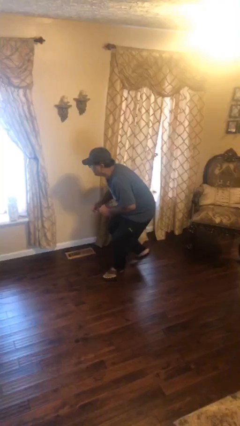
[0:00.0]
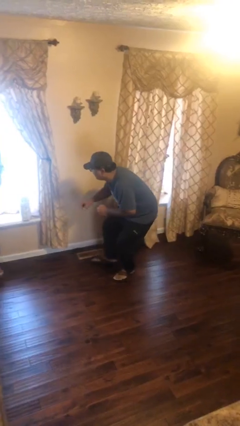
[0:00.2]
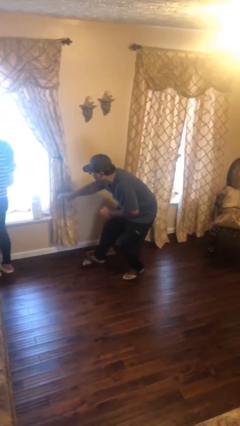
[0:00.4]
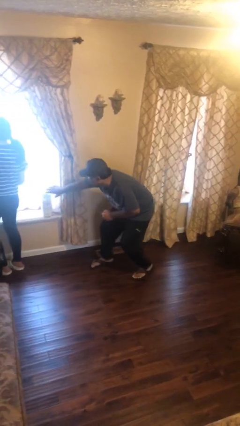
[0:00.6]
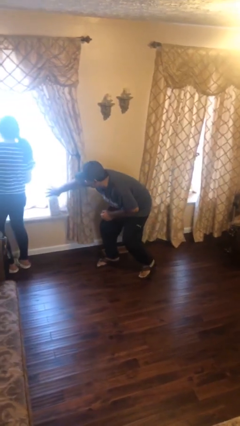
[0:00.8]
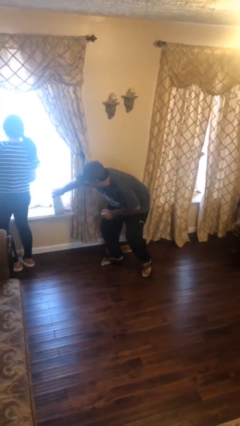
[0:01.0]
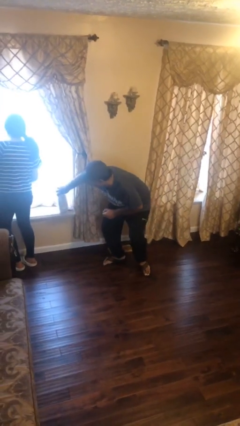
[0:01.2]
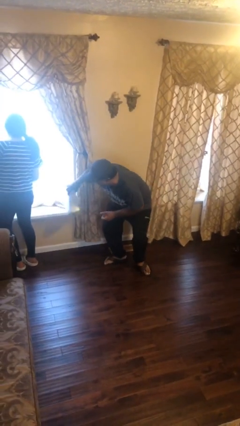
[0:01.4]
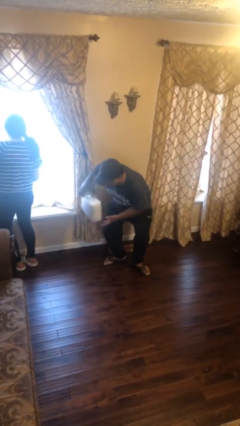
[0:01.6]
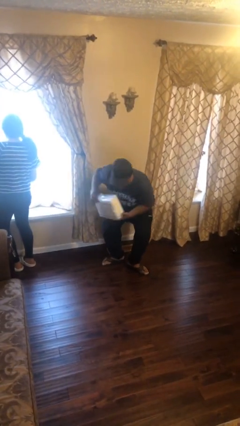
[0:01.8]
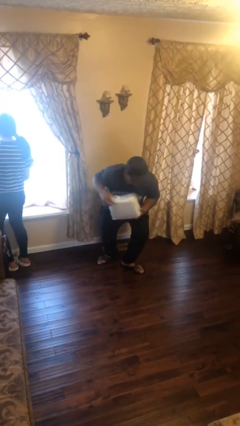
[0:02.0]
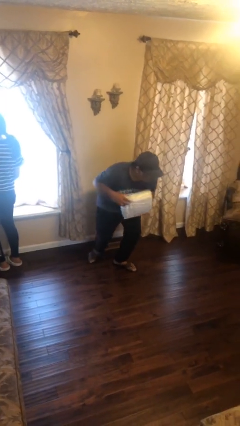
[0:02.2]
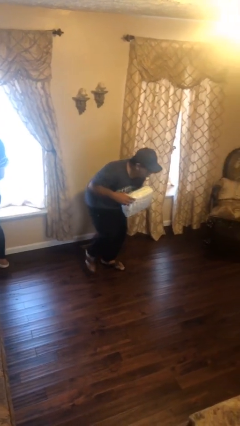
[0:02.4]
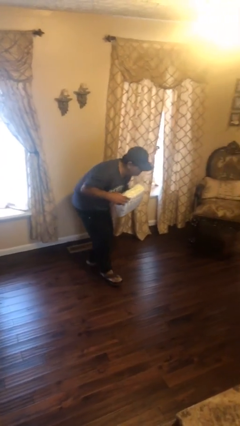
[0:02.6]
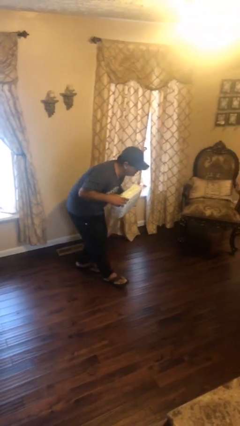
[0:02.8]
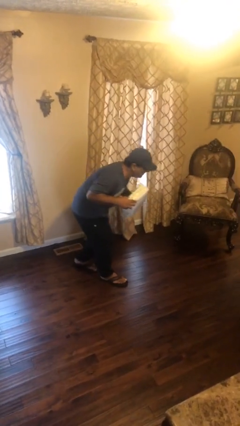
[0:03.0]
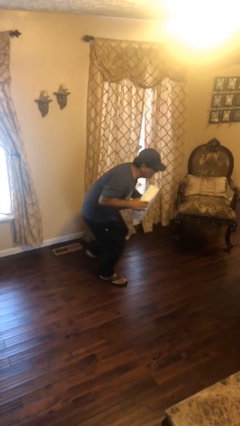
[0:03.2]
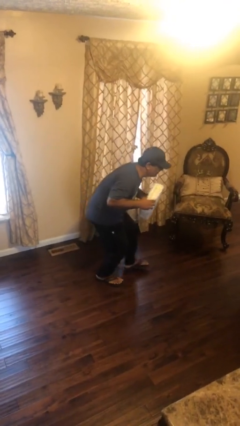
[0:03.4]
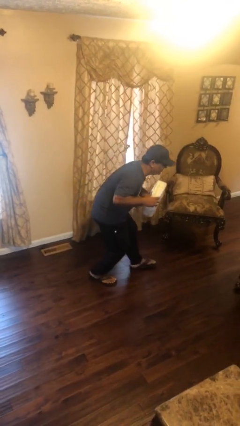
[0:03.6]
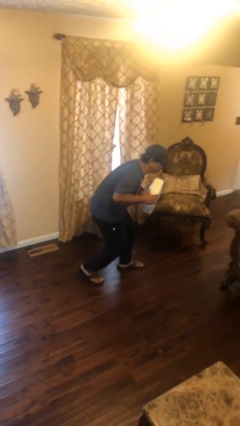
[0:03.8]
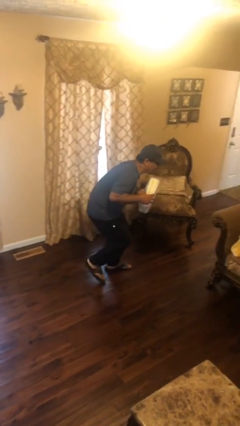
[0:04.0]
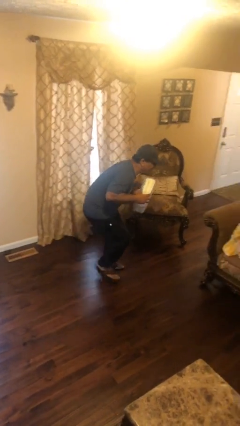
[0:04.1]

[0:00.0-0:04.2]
person steals object from person

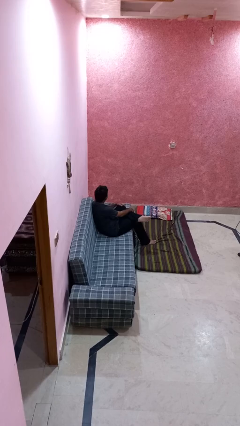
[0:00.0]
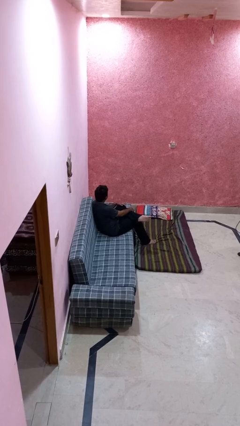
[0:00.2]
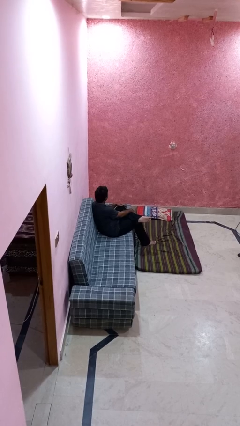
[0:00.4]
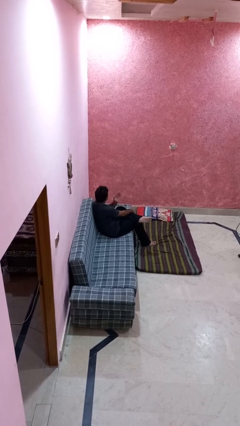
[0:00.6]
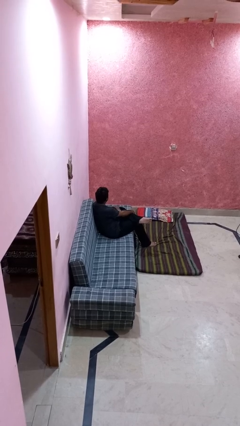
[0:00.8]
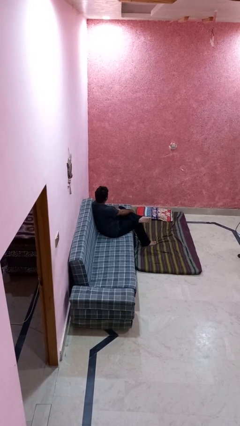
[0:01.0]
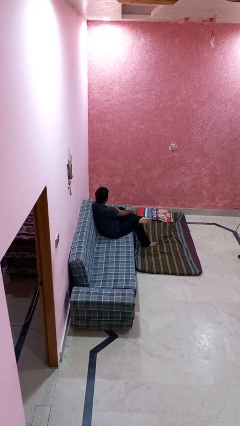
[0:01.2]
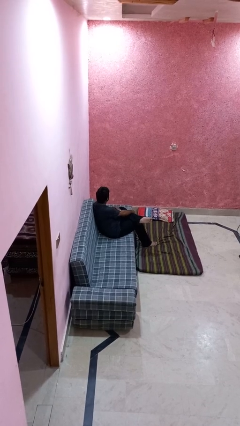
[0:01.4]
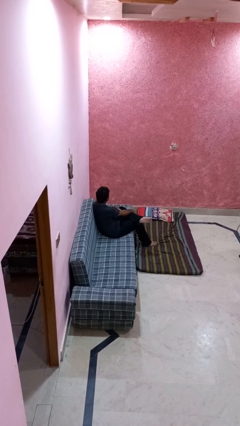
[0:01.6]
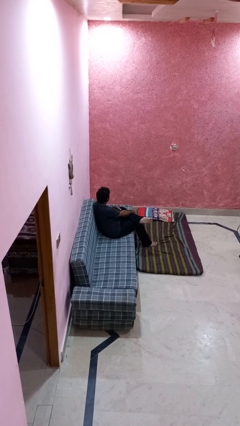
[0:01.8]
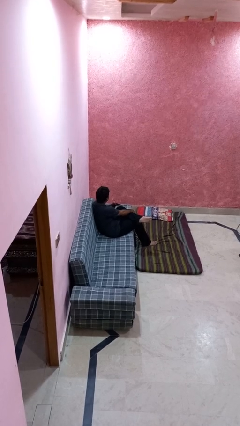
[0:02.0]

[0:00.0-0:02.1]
person swats bug

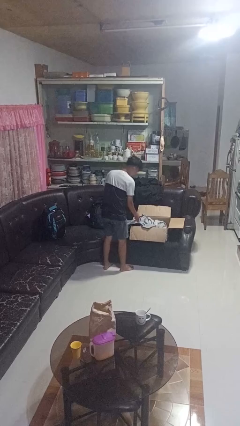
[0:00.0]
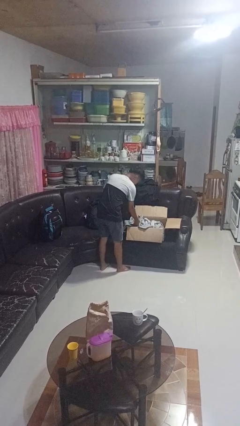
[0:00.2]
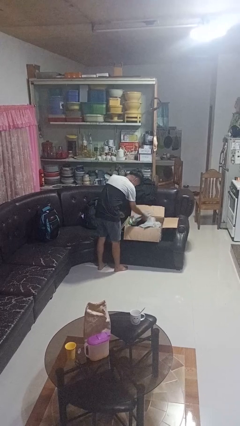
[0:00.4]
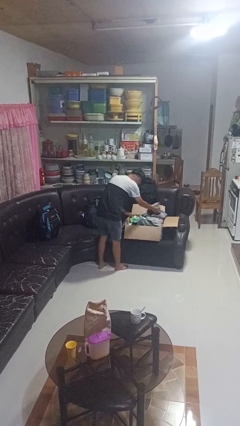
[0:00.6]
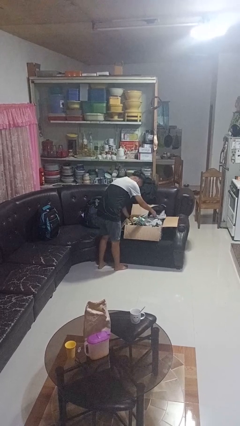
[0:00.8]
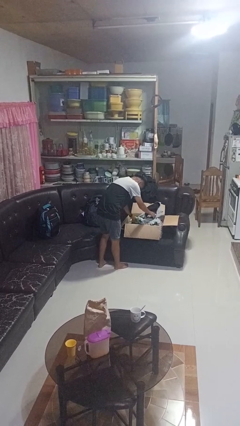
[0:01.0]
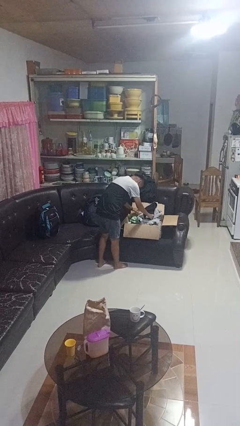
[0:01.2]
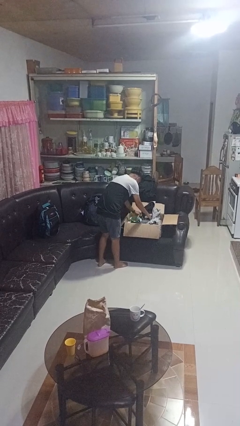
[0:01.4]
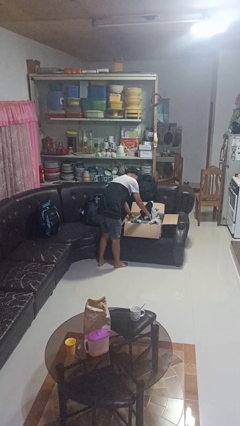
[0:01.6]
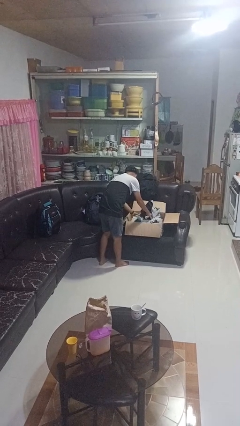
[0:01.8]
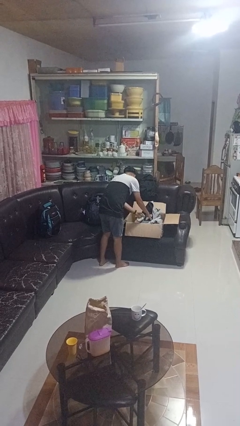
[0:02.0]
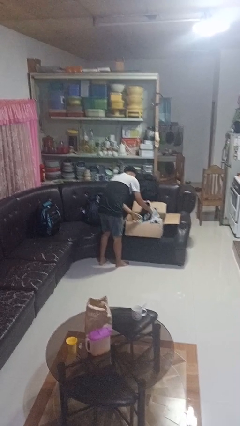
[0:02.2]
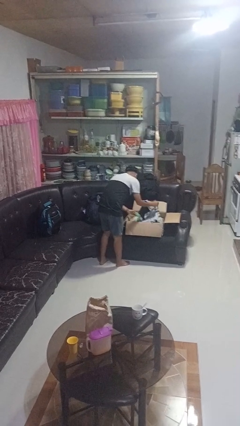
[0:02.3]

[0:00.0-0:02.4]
person searches in box

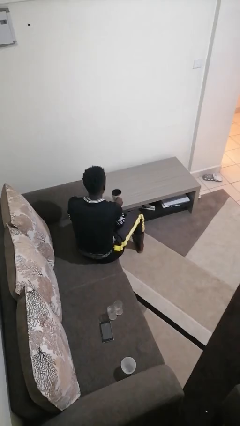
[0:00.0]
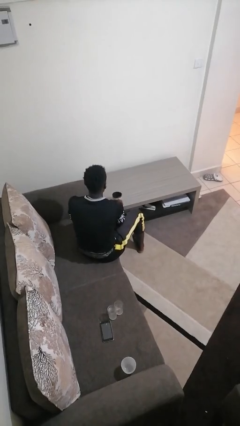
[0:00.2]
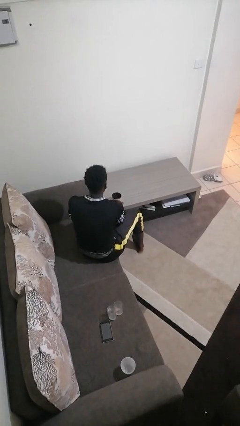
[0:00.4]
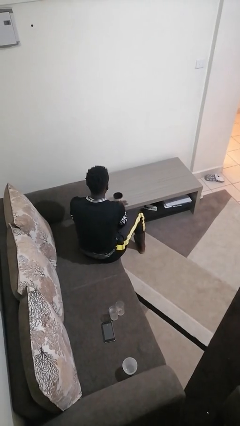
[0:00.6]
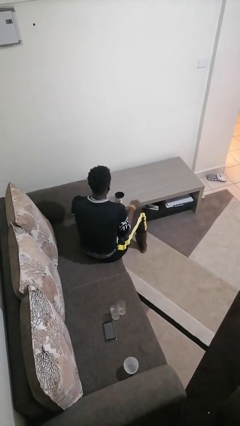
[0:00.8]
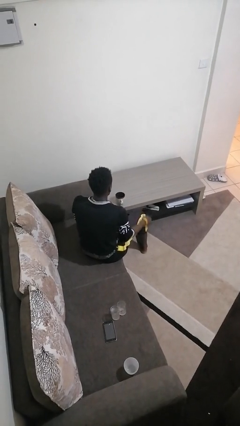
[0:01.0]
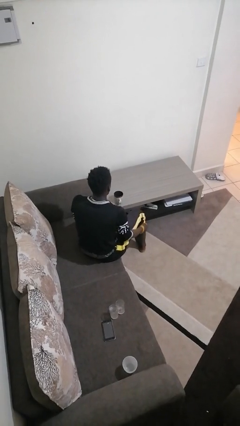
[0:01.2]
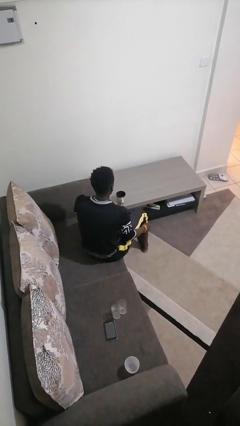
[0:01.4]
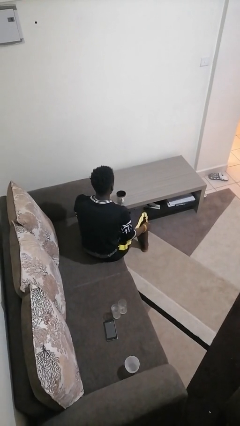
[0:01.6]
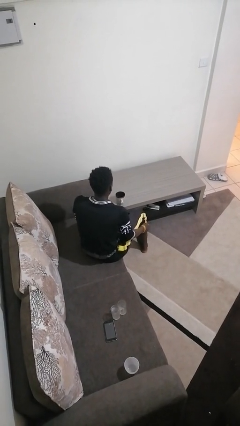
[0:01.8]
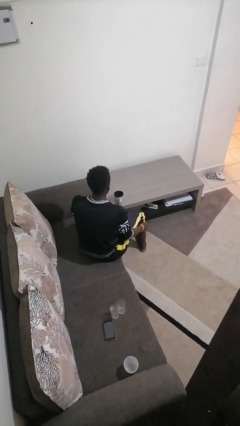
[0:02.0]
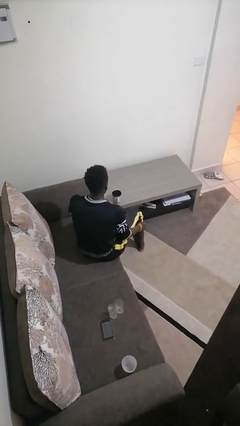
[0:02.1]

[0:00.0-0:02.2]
person puts down object on table

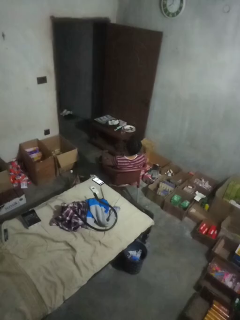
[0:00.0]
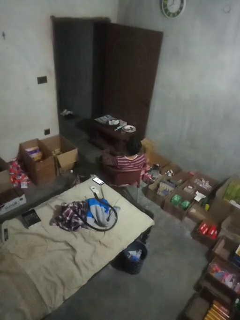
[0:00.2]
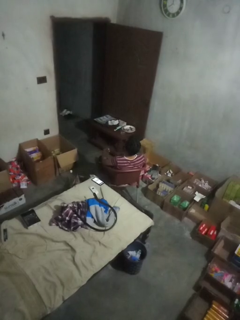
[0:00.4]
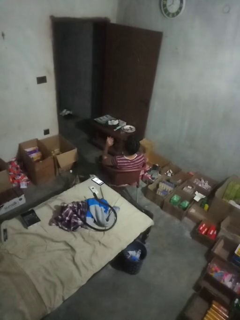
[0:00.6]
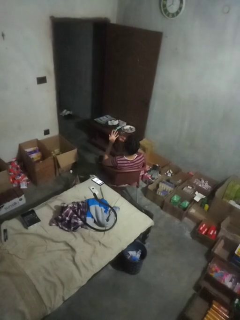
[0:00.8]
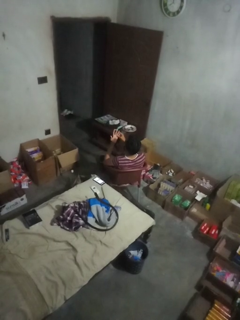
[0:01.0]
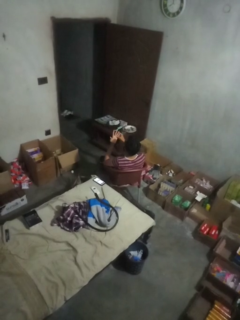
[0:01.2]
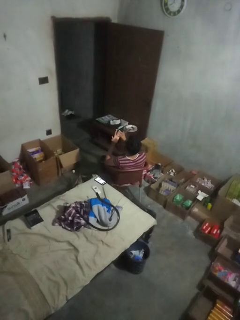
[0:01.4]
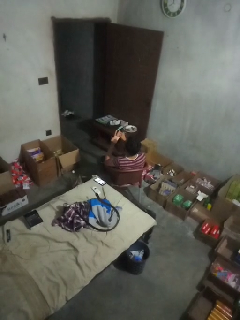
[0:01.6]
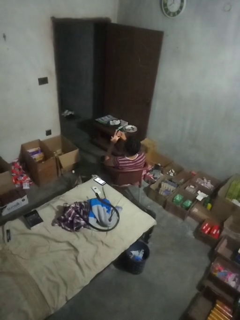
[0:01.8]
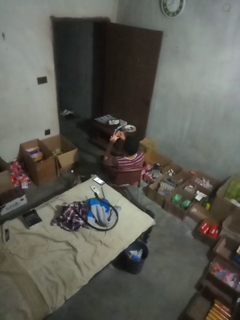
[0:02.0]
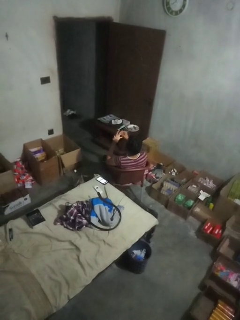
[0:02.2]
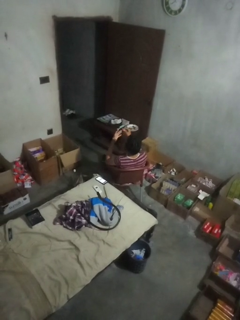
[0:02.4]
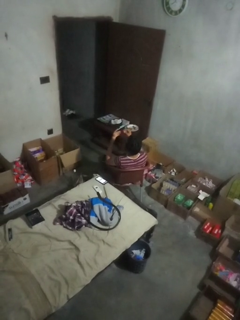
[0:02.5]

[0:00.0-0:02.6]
person takes off ring

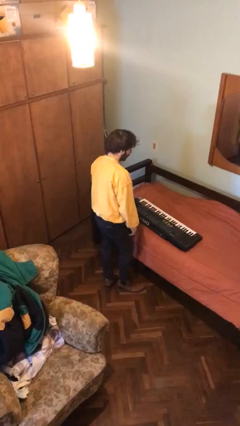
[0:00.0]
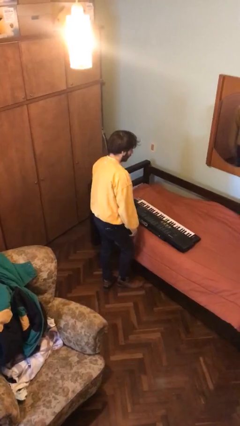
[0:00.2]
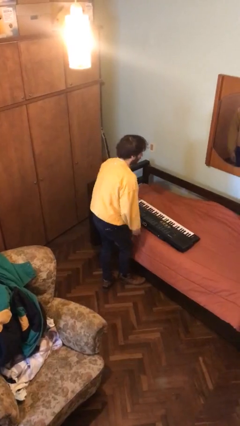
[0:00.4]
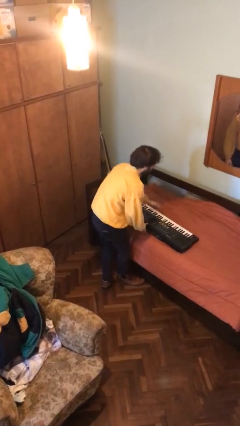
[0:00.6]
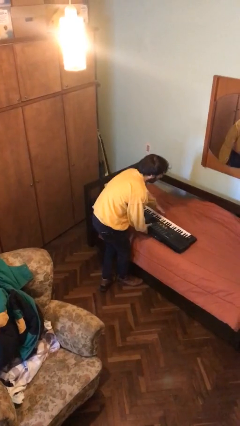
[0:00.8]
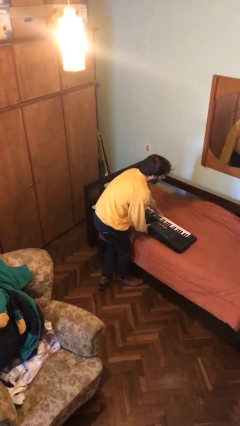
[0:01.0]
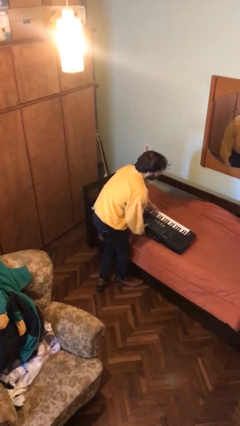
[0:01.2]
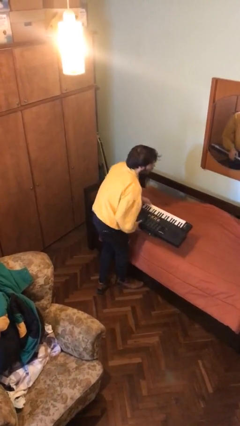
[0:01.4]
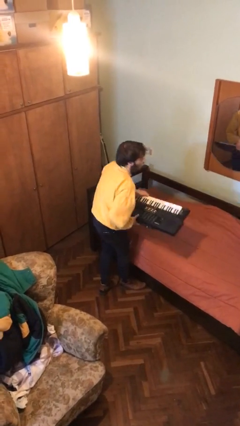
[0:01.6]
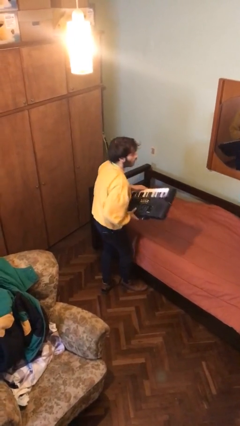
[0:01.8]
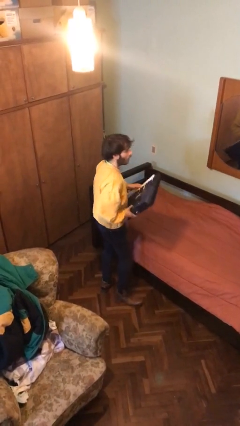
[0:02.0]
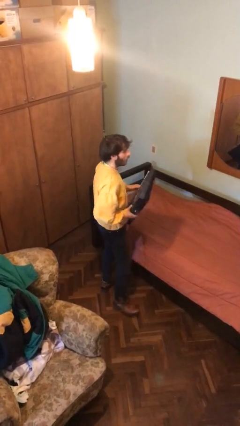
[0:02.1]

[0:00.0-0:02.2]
person picks up object from bed

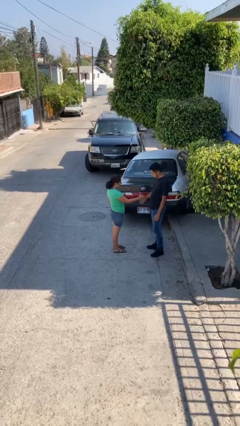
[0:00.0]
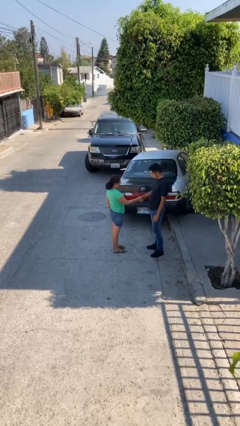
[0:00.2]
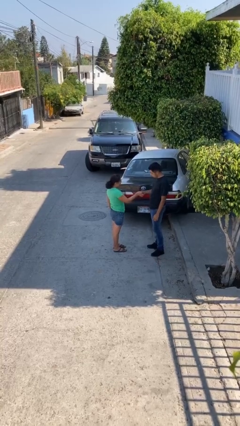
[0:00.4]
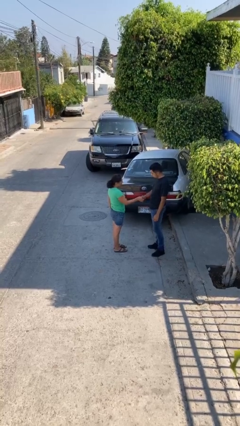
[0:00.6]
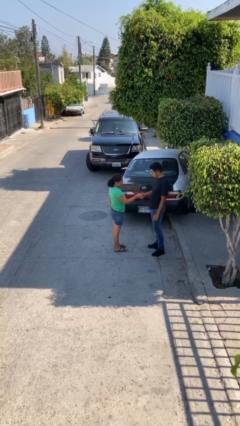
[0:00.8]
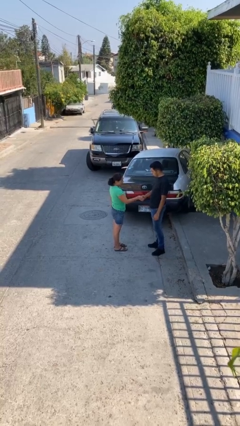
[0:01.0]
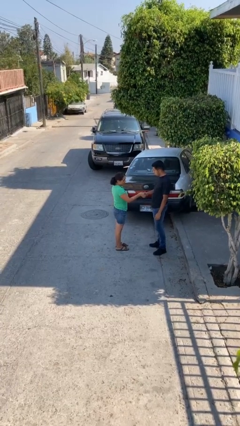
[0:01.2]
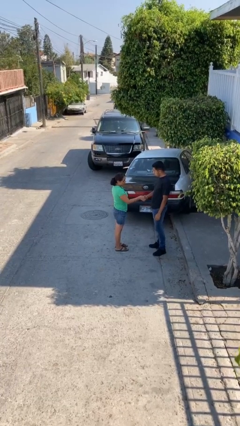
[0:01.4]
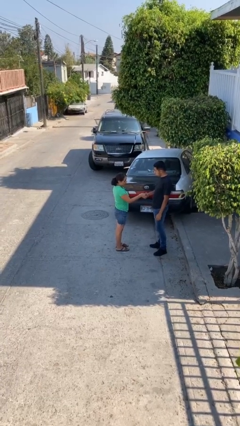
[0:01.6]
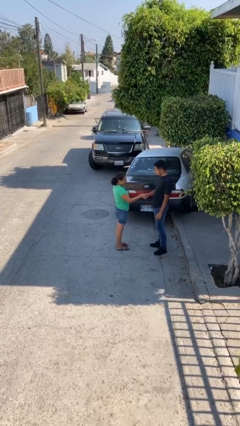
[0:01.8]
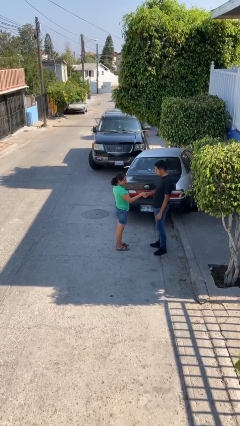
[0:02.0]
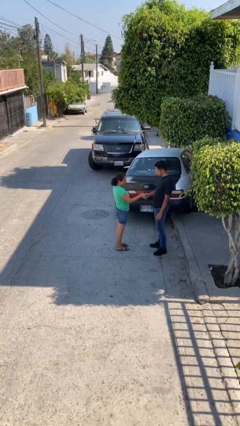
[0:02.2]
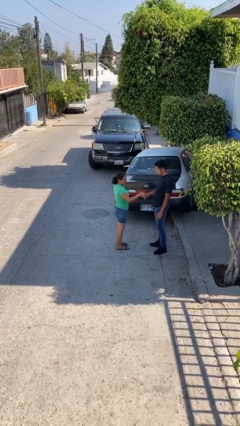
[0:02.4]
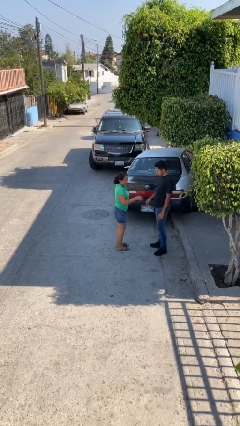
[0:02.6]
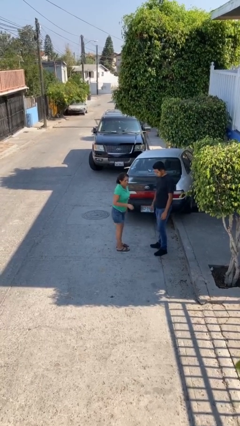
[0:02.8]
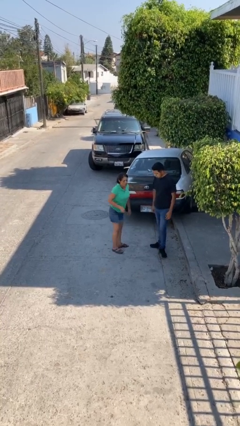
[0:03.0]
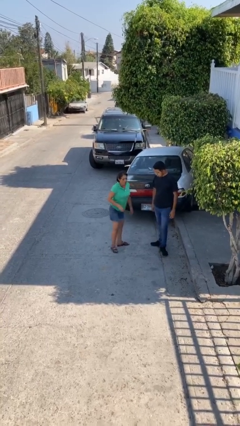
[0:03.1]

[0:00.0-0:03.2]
person shakes hand
